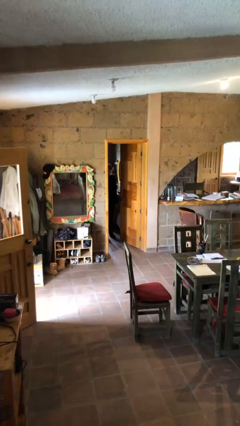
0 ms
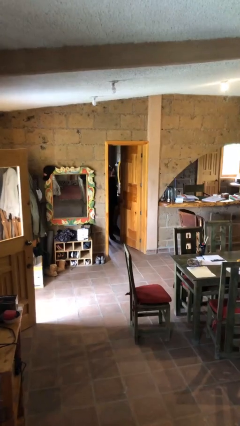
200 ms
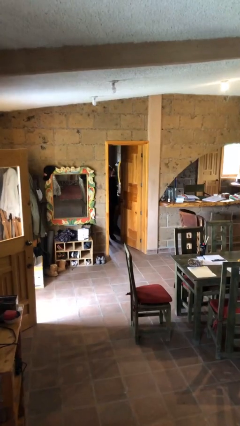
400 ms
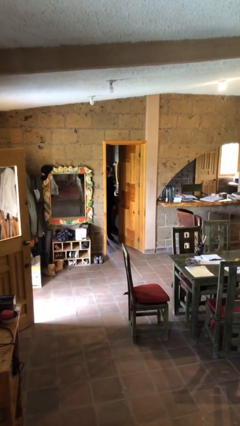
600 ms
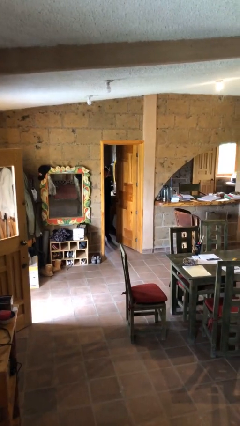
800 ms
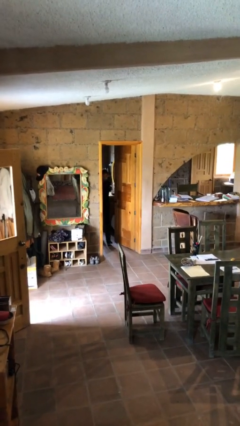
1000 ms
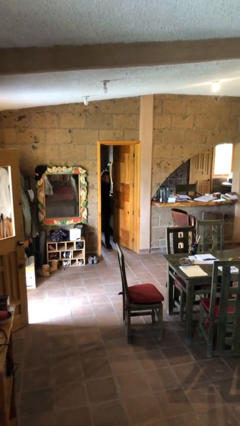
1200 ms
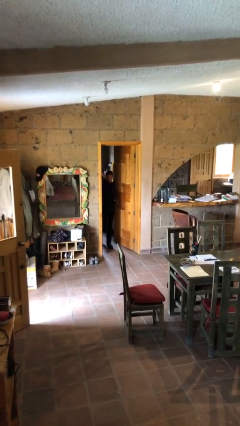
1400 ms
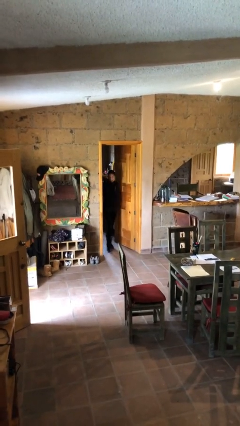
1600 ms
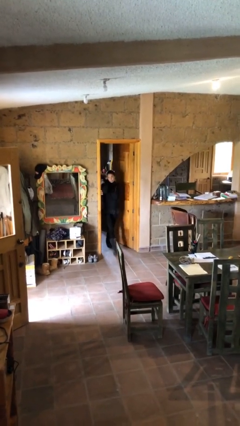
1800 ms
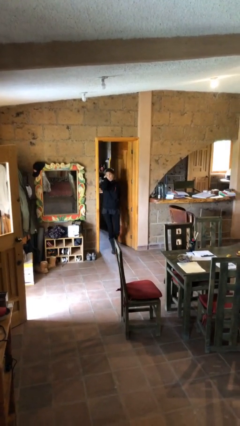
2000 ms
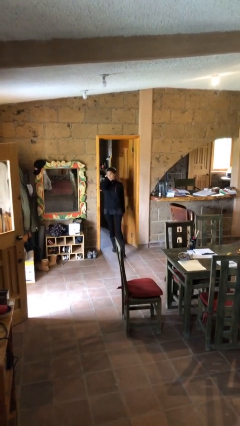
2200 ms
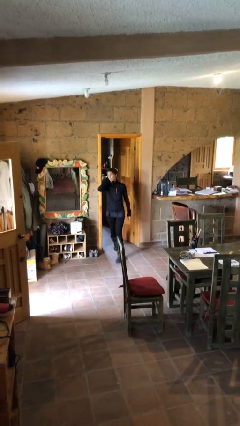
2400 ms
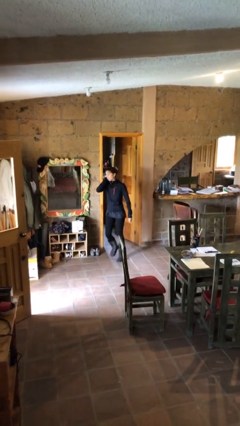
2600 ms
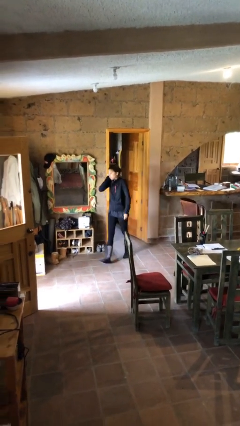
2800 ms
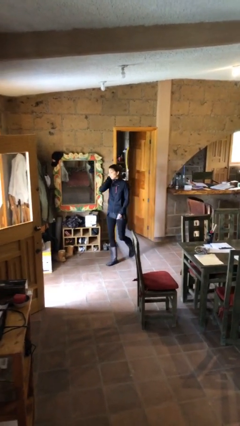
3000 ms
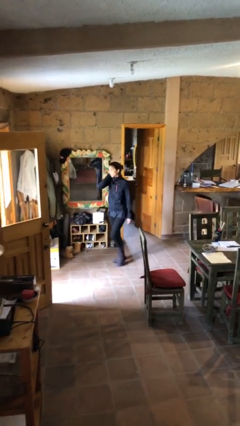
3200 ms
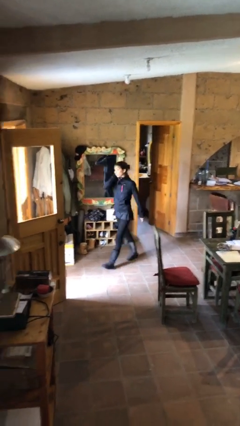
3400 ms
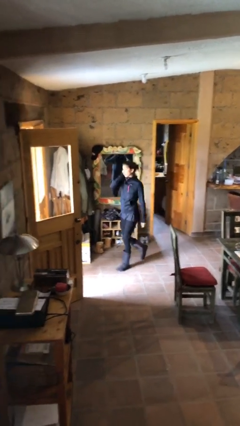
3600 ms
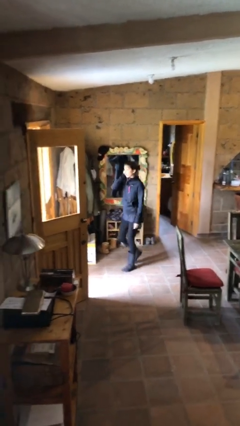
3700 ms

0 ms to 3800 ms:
person enters scene through structure

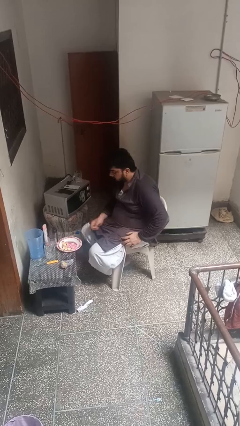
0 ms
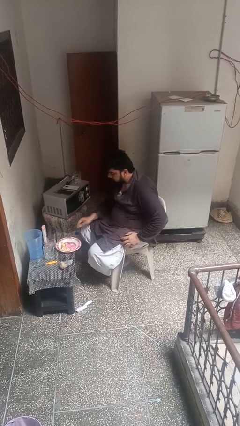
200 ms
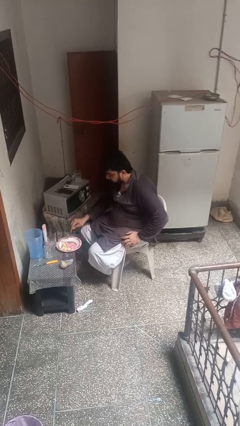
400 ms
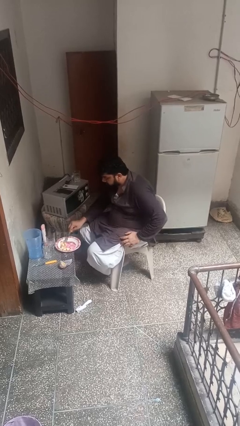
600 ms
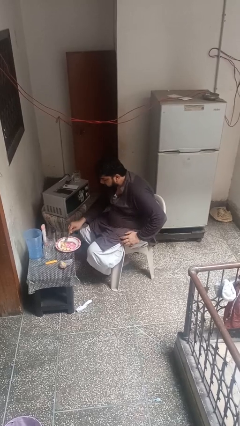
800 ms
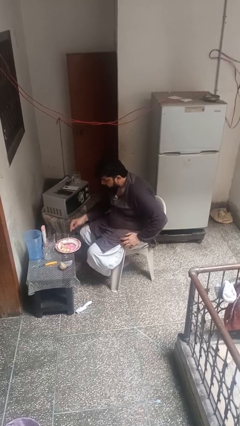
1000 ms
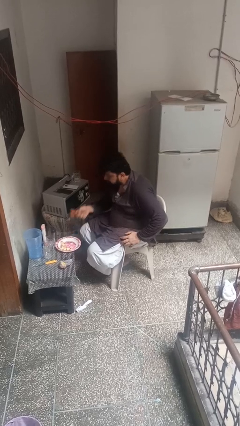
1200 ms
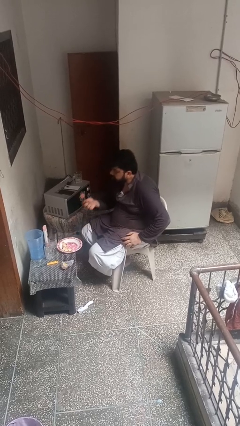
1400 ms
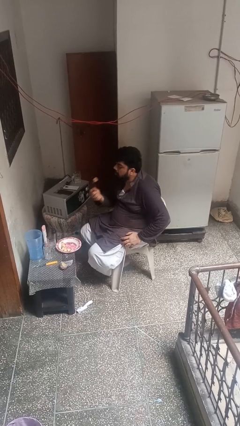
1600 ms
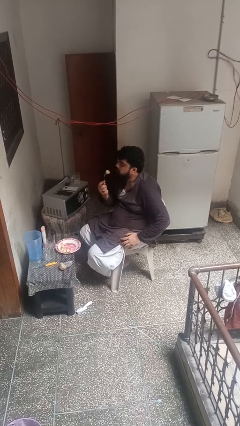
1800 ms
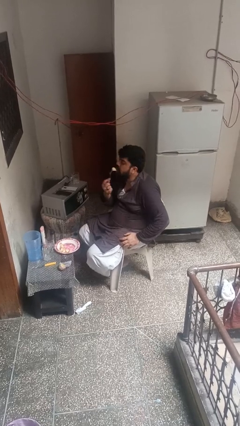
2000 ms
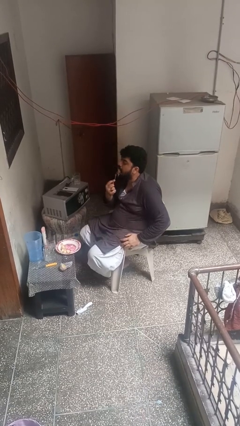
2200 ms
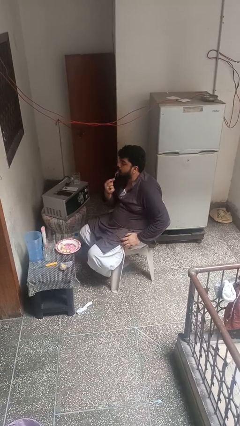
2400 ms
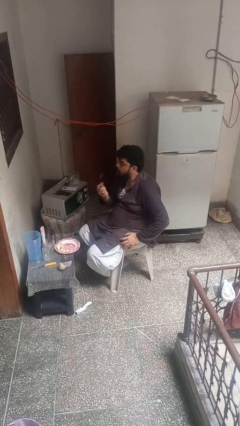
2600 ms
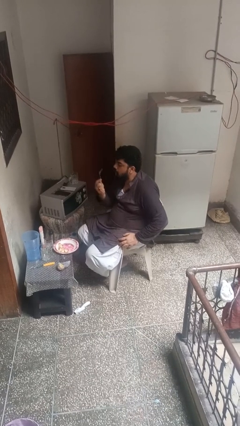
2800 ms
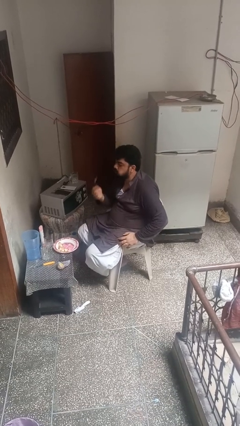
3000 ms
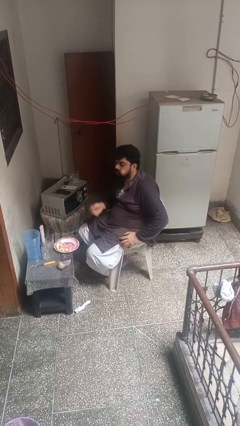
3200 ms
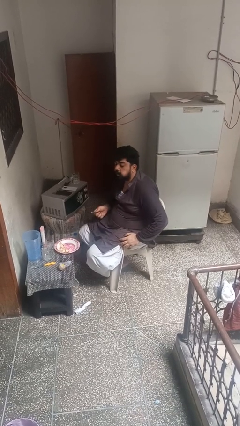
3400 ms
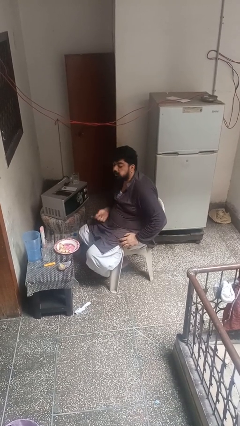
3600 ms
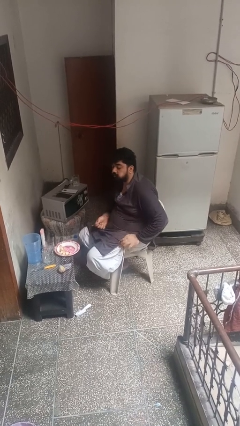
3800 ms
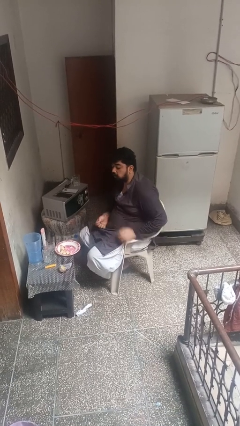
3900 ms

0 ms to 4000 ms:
person eats with utensil

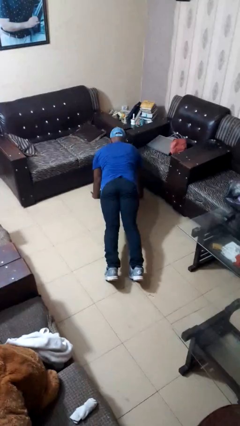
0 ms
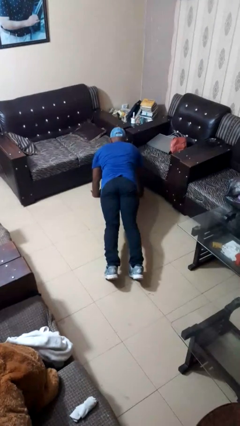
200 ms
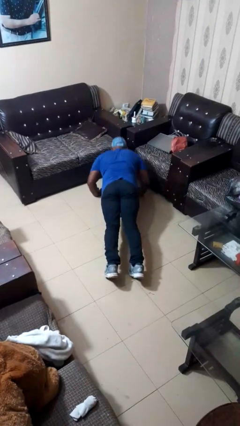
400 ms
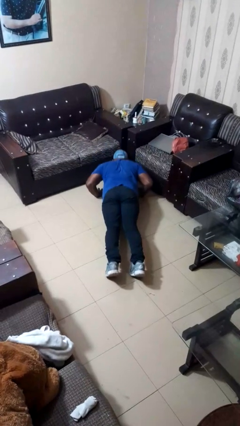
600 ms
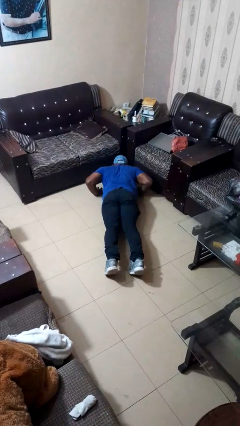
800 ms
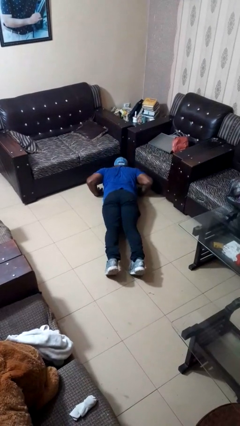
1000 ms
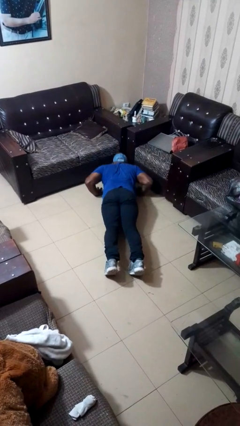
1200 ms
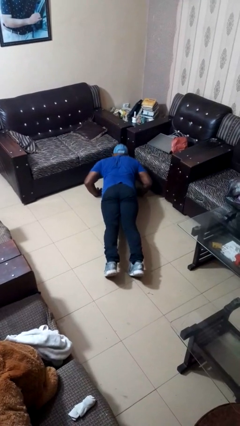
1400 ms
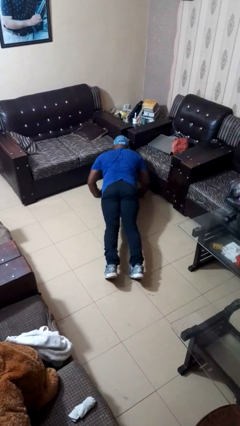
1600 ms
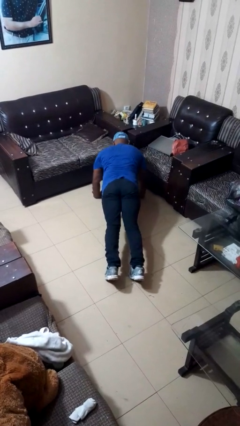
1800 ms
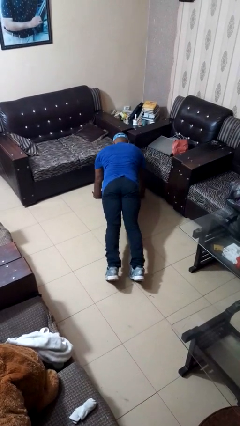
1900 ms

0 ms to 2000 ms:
person exercises with pushup

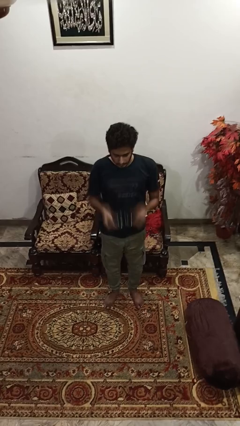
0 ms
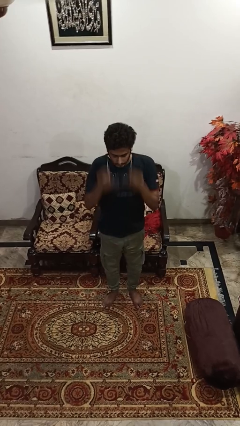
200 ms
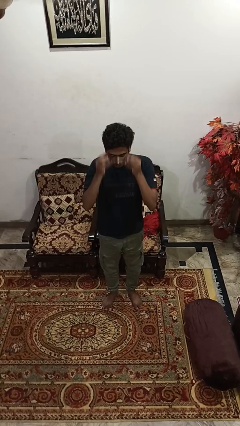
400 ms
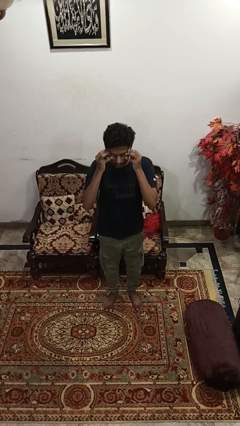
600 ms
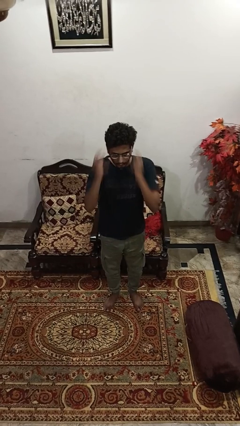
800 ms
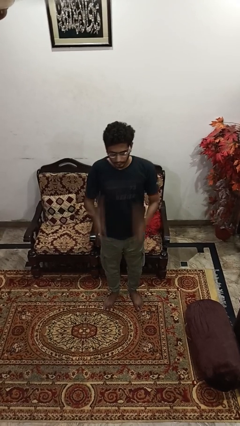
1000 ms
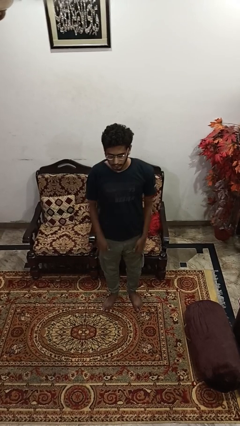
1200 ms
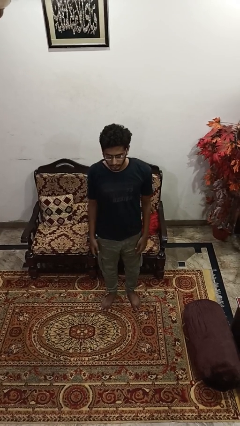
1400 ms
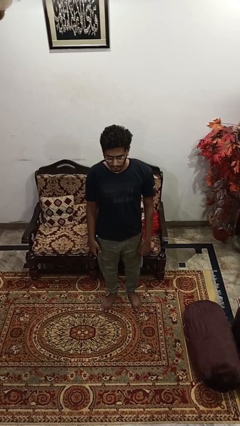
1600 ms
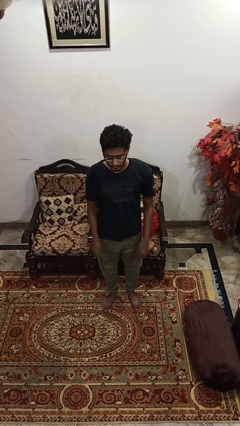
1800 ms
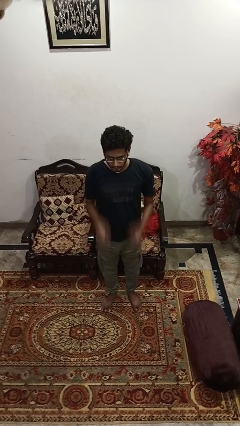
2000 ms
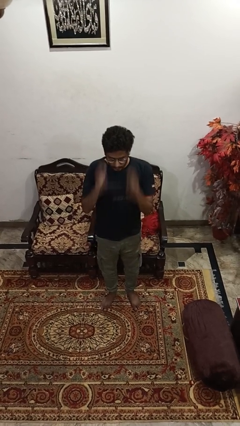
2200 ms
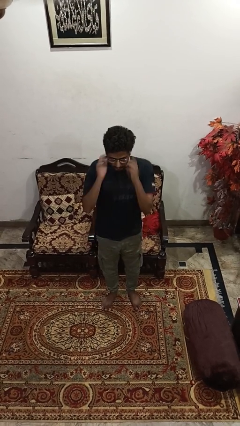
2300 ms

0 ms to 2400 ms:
person puts on glasses

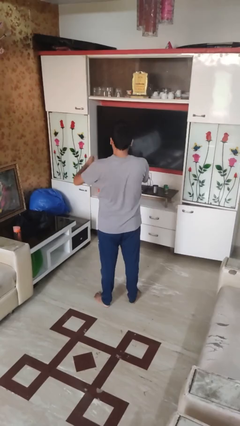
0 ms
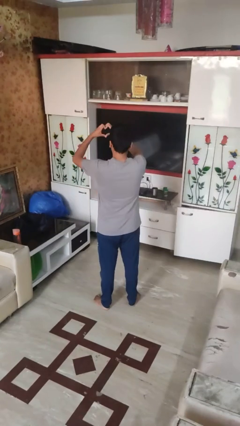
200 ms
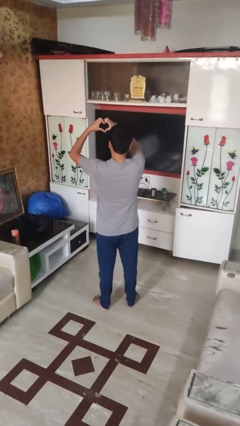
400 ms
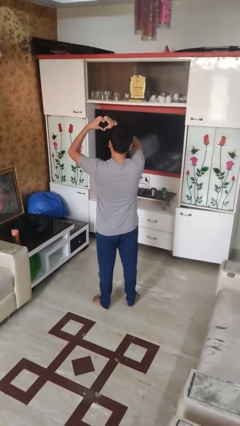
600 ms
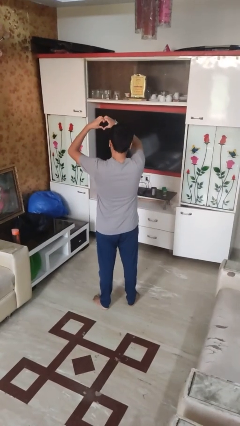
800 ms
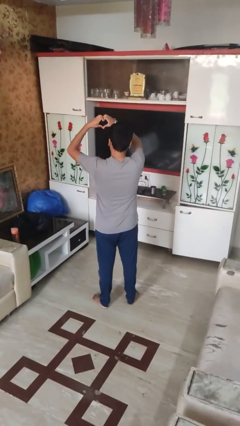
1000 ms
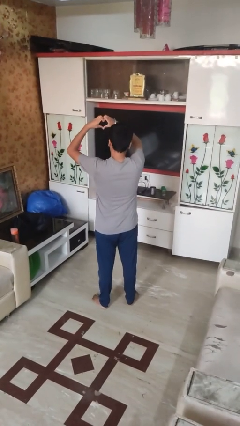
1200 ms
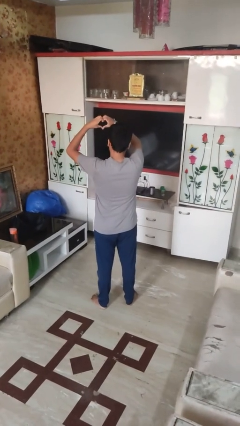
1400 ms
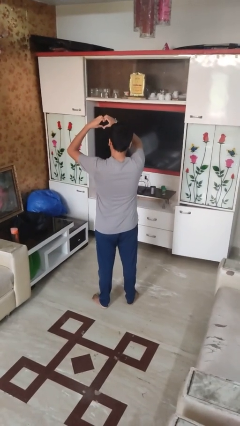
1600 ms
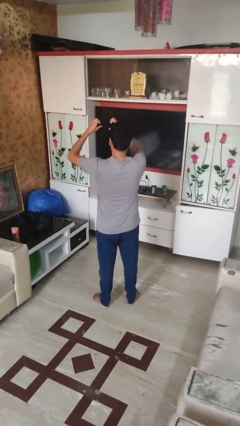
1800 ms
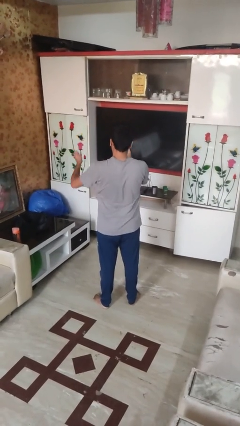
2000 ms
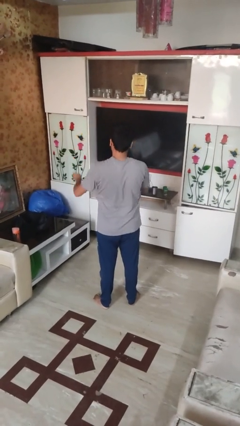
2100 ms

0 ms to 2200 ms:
person gestures heart

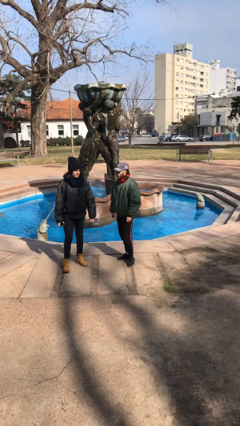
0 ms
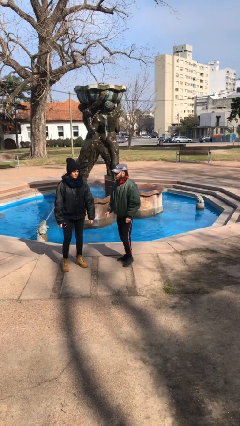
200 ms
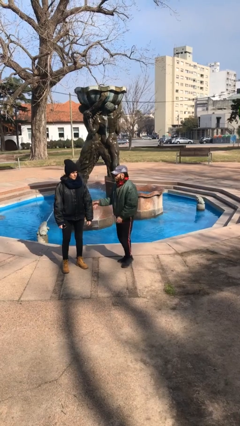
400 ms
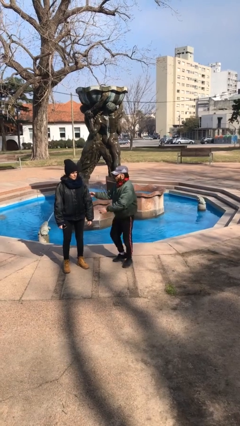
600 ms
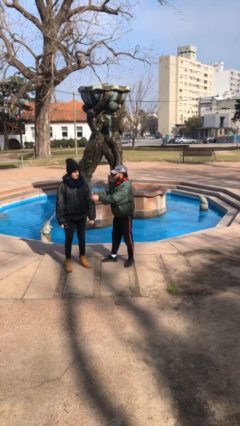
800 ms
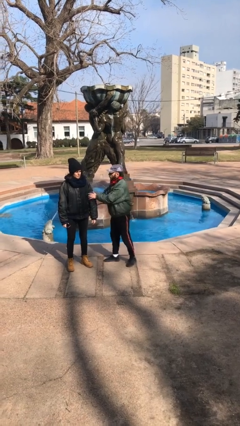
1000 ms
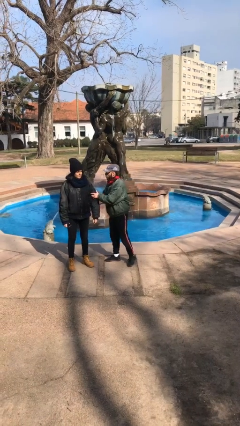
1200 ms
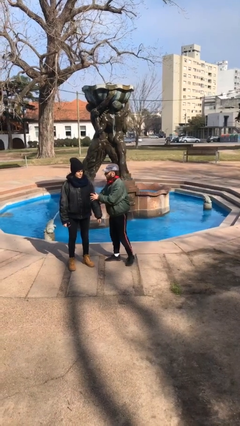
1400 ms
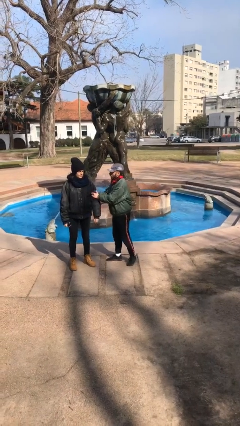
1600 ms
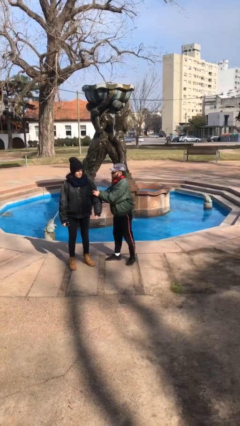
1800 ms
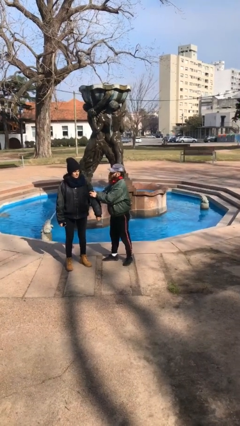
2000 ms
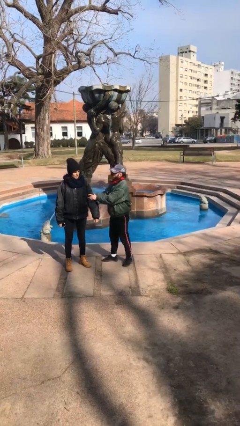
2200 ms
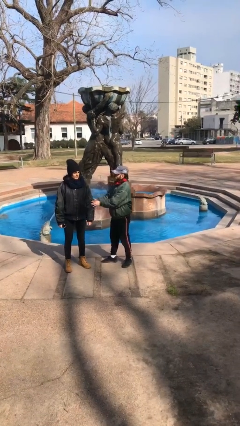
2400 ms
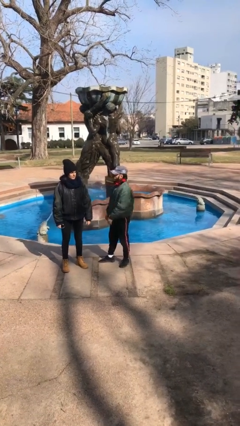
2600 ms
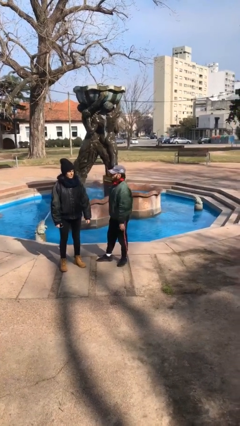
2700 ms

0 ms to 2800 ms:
person grabs person by bicep

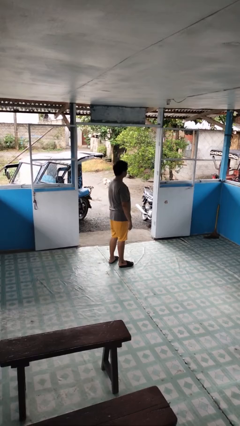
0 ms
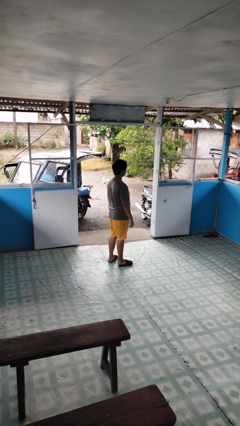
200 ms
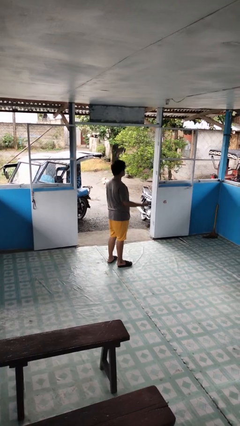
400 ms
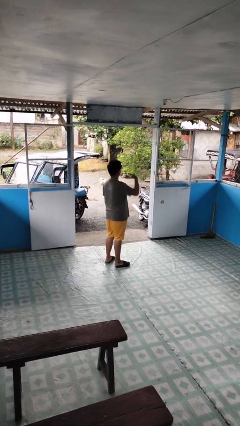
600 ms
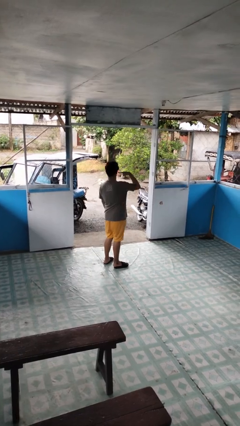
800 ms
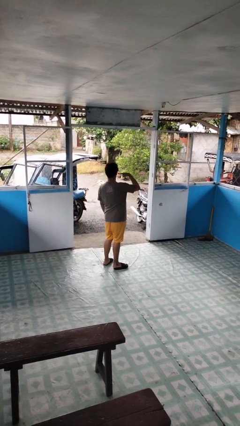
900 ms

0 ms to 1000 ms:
person gestures listen closely
